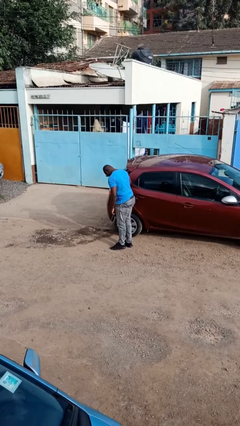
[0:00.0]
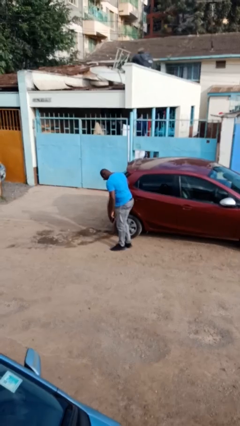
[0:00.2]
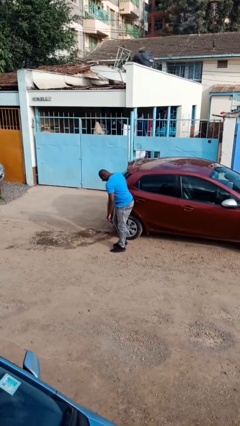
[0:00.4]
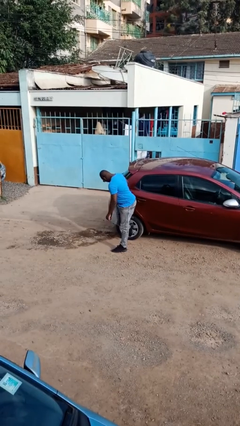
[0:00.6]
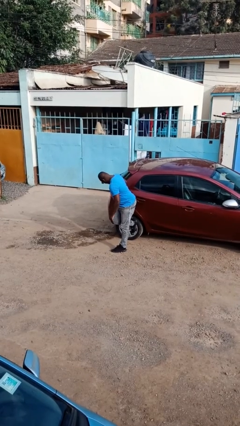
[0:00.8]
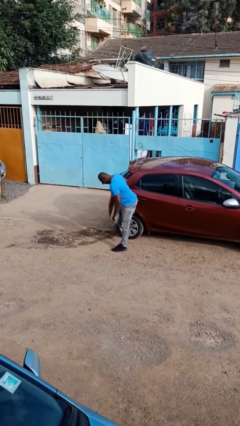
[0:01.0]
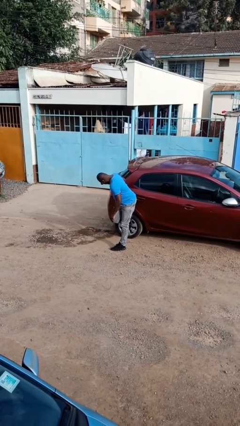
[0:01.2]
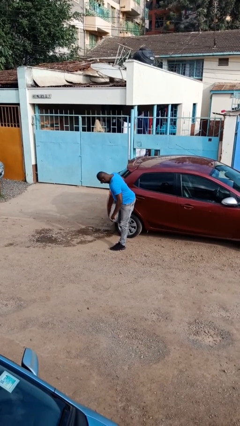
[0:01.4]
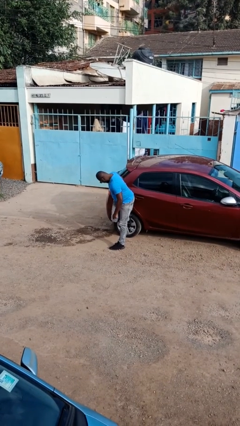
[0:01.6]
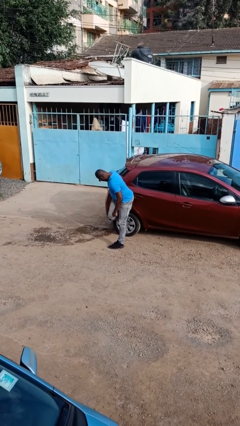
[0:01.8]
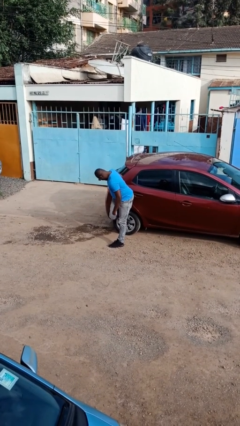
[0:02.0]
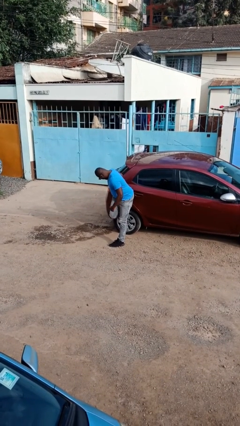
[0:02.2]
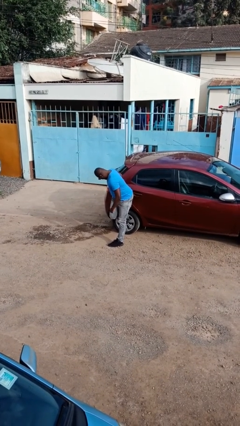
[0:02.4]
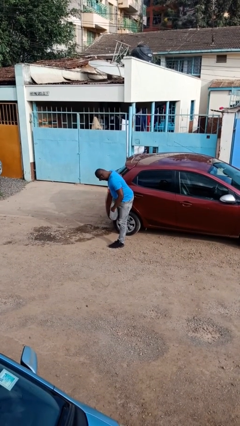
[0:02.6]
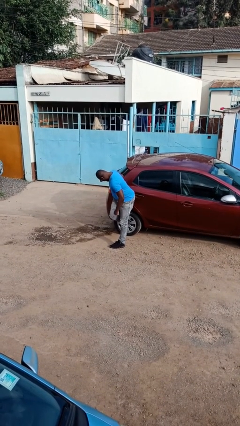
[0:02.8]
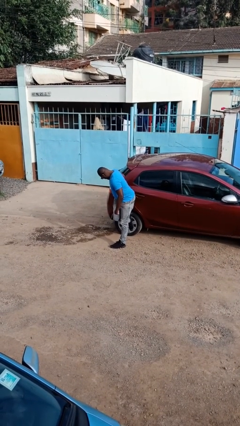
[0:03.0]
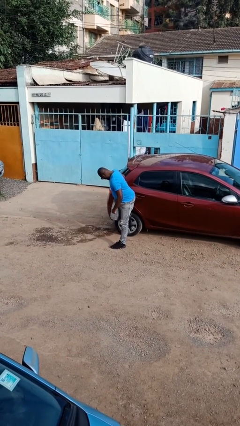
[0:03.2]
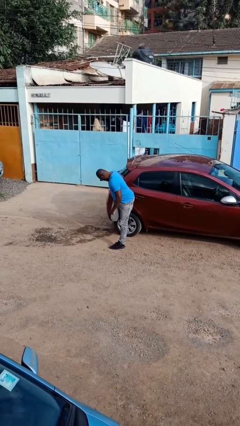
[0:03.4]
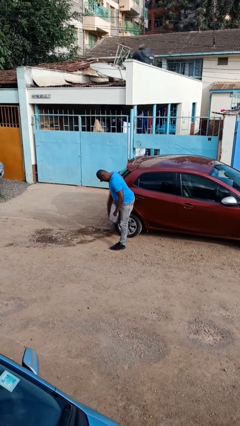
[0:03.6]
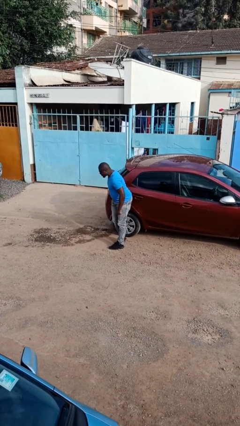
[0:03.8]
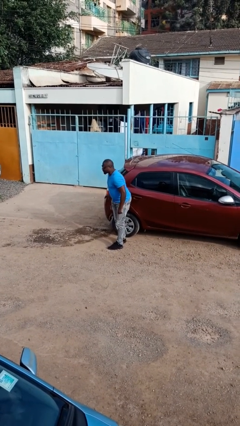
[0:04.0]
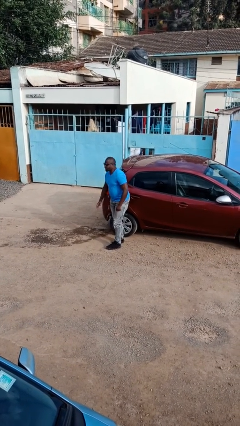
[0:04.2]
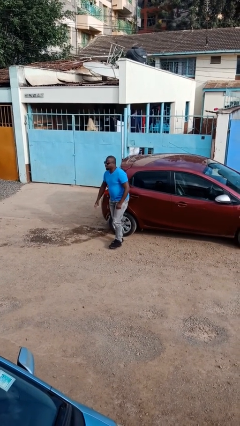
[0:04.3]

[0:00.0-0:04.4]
person kicks car tires

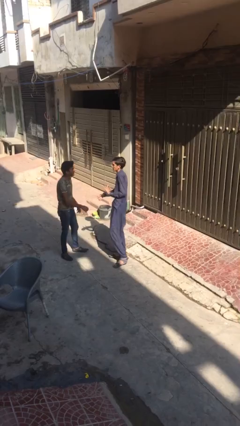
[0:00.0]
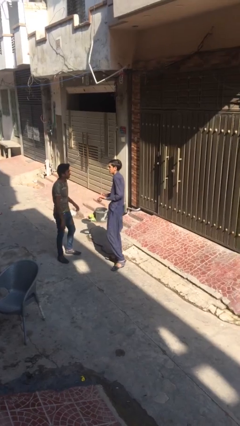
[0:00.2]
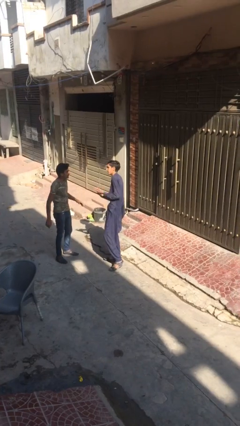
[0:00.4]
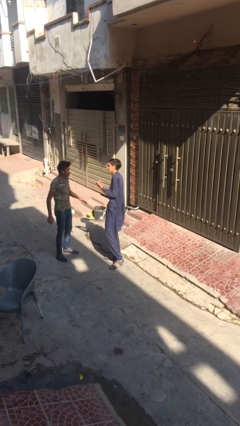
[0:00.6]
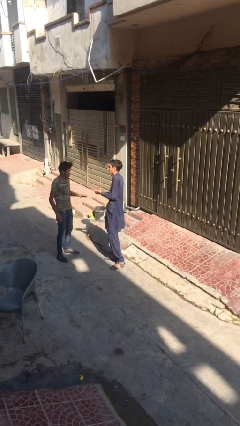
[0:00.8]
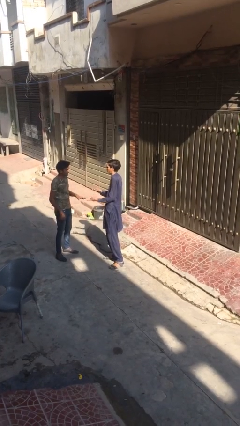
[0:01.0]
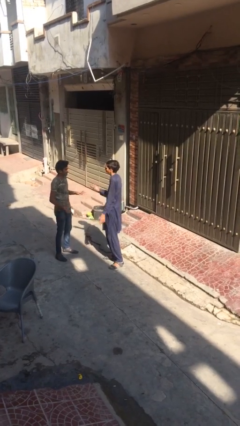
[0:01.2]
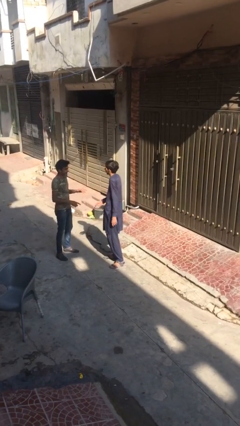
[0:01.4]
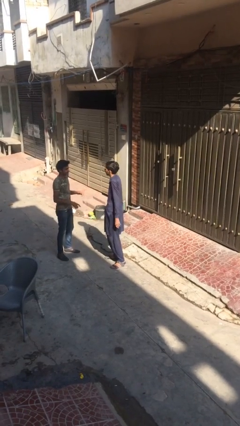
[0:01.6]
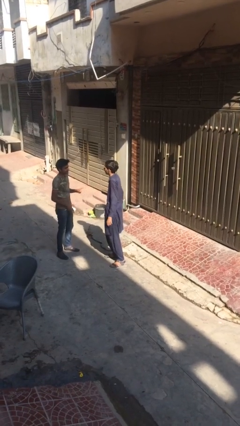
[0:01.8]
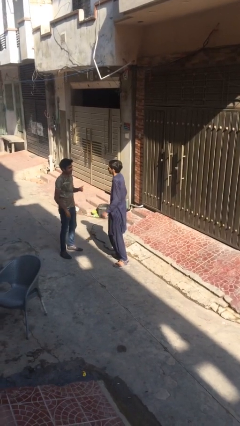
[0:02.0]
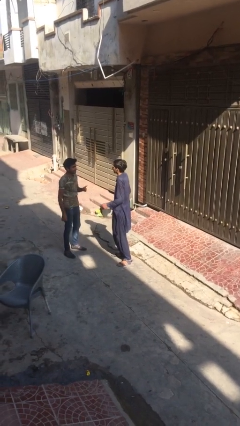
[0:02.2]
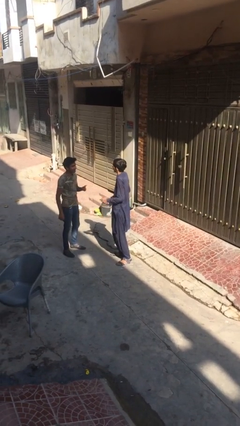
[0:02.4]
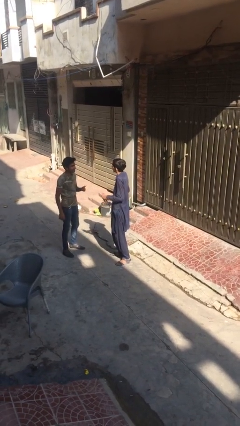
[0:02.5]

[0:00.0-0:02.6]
person talks to person

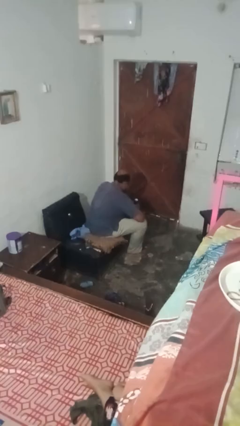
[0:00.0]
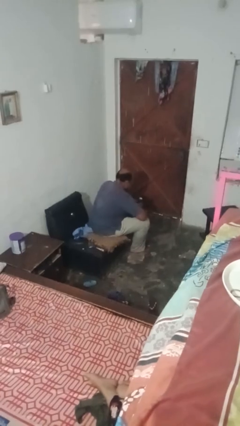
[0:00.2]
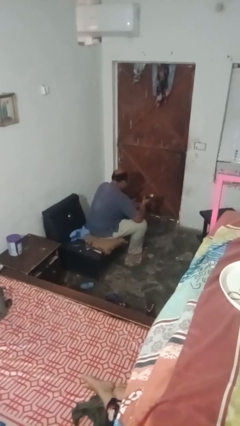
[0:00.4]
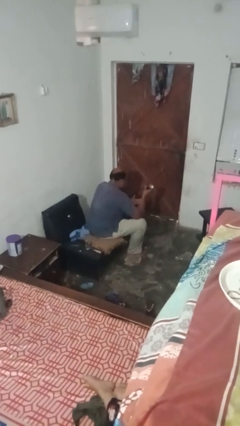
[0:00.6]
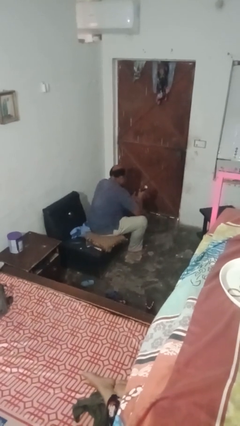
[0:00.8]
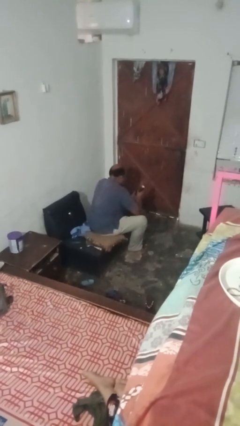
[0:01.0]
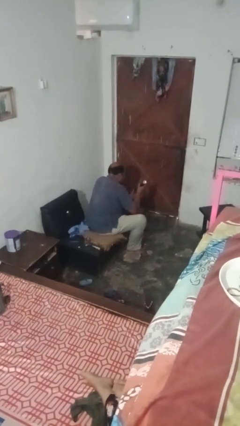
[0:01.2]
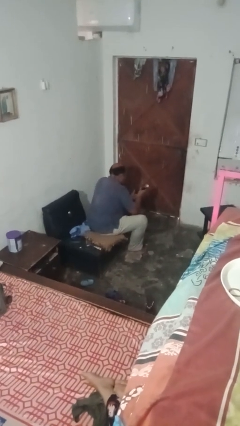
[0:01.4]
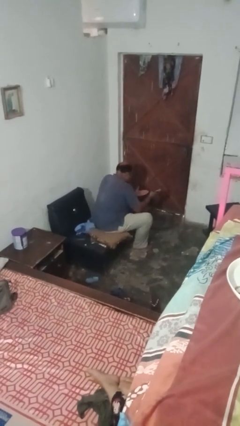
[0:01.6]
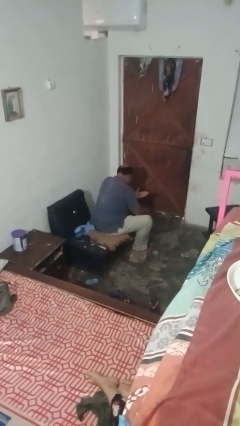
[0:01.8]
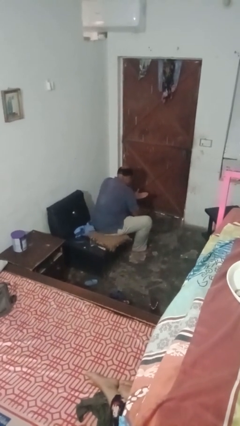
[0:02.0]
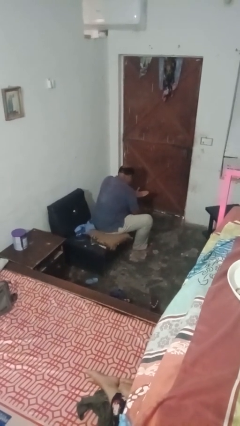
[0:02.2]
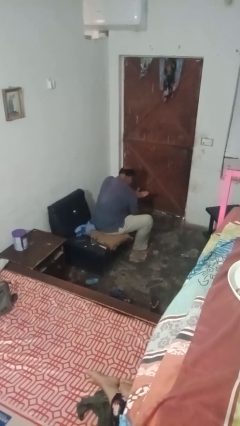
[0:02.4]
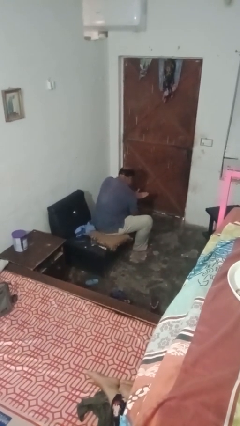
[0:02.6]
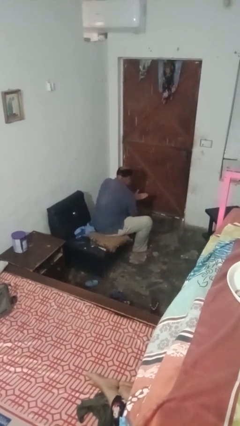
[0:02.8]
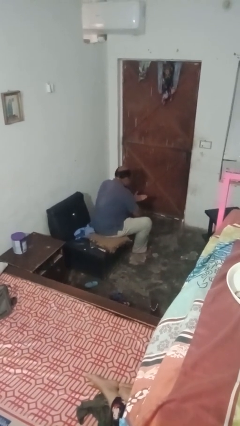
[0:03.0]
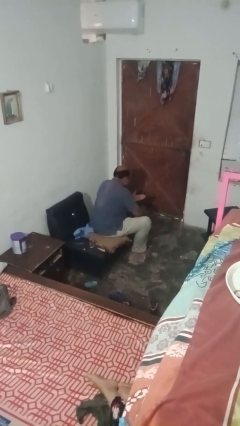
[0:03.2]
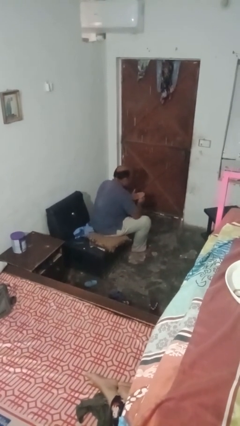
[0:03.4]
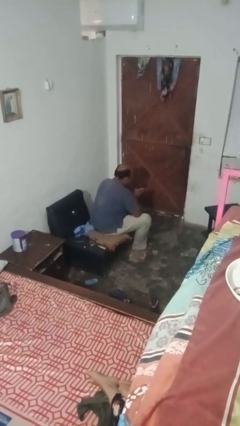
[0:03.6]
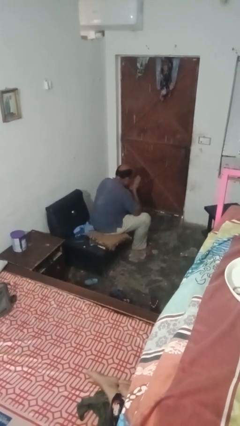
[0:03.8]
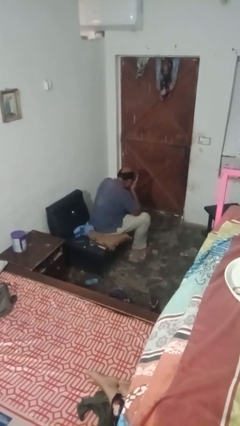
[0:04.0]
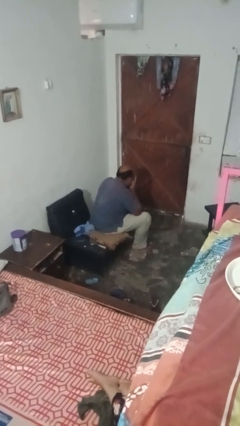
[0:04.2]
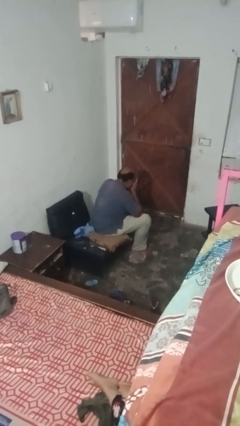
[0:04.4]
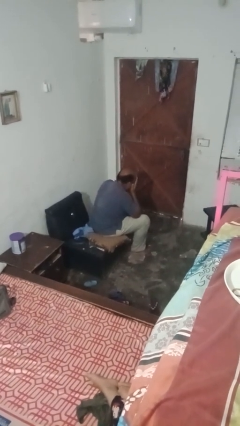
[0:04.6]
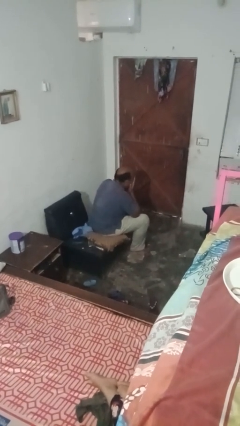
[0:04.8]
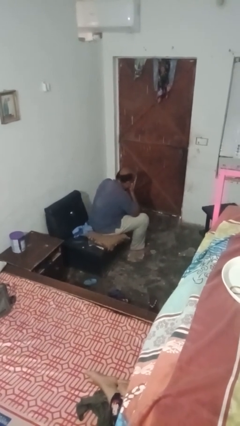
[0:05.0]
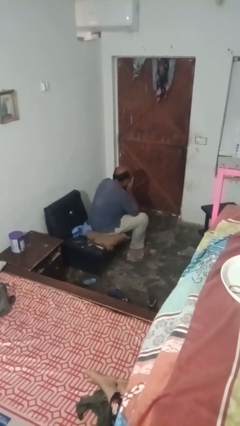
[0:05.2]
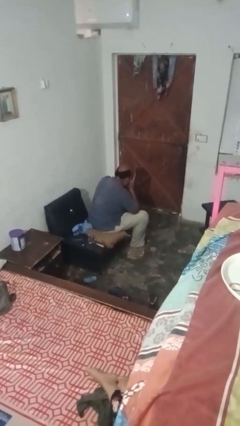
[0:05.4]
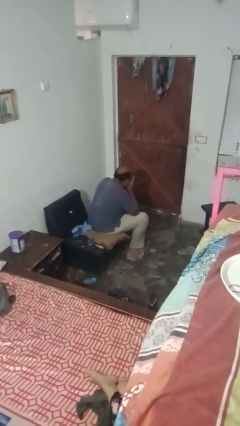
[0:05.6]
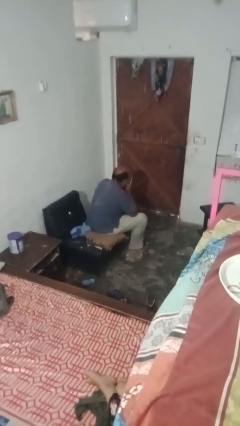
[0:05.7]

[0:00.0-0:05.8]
person applies foundation makeup

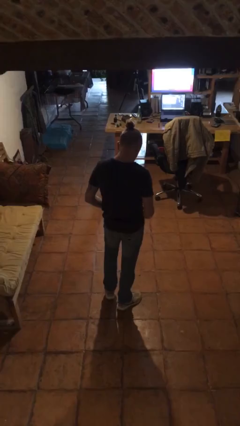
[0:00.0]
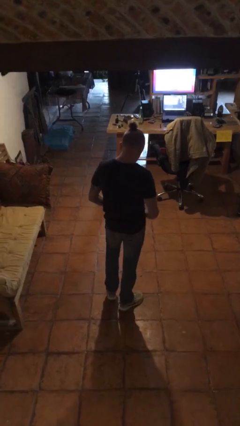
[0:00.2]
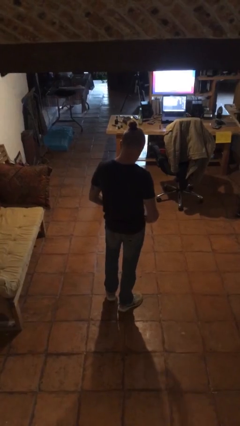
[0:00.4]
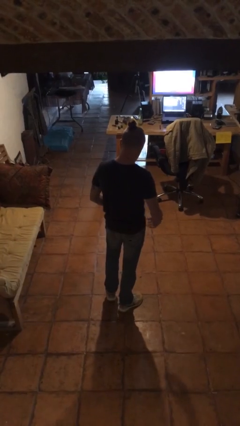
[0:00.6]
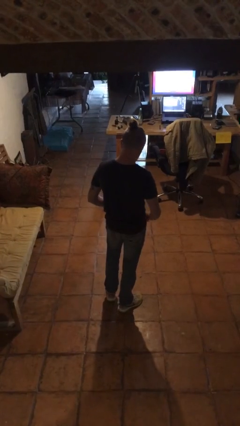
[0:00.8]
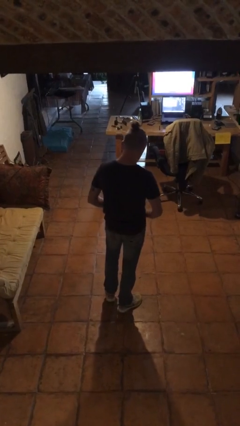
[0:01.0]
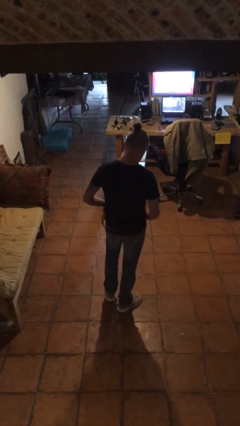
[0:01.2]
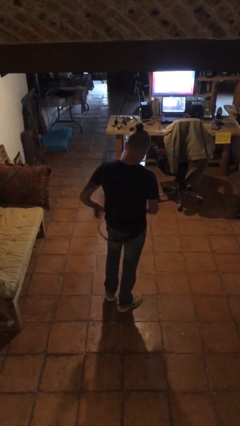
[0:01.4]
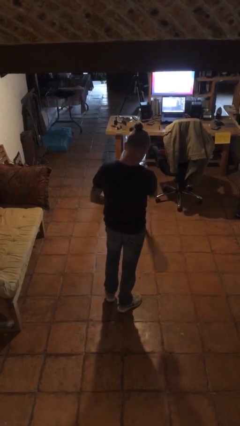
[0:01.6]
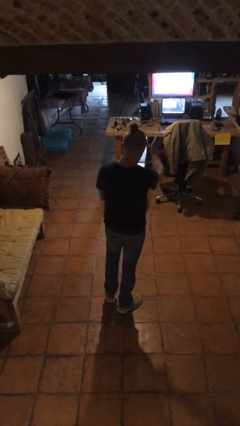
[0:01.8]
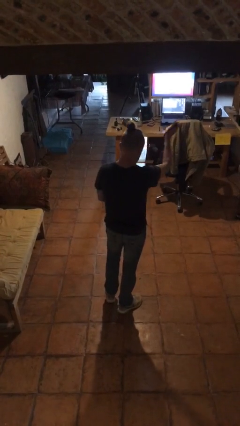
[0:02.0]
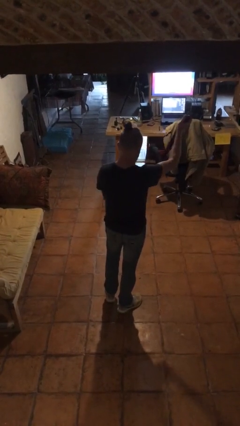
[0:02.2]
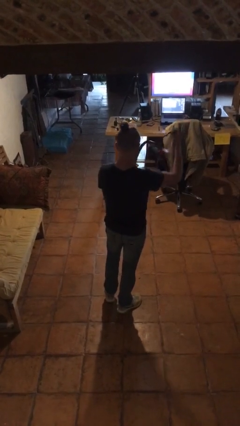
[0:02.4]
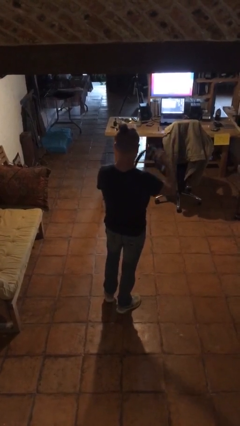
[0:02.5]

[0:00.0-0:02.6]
person takes off belt

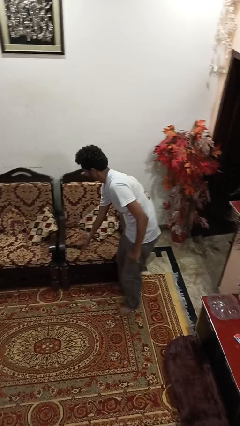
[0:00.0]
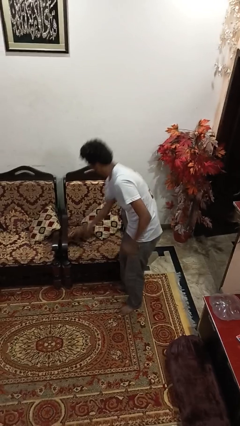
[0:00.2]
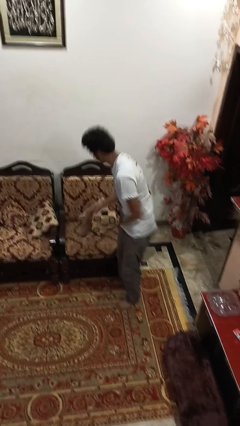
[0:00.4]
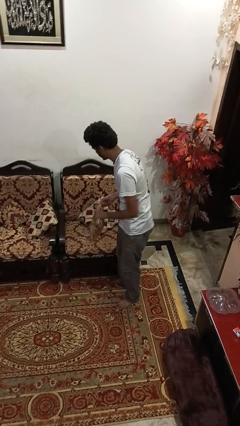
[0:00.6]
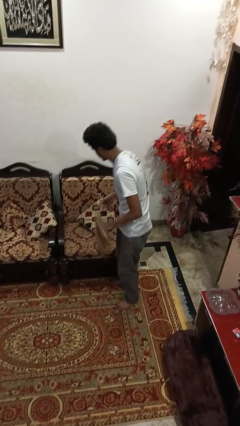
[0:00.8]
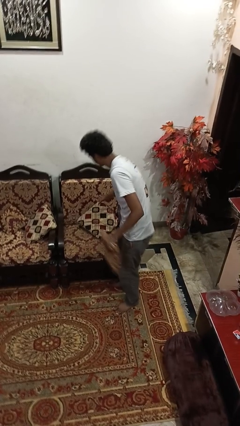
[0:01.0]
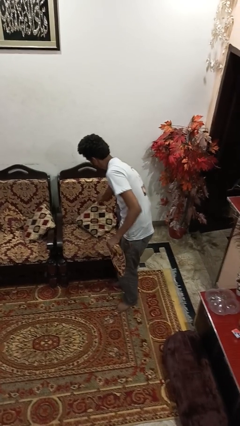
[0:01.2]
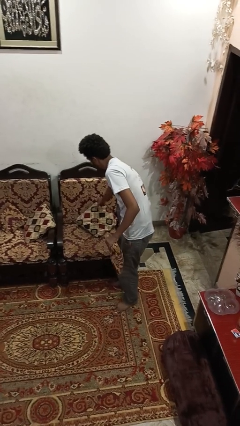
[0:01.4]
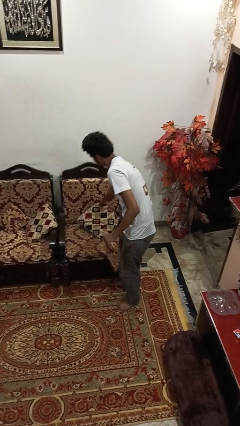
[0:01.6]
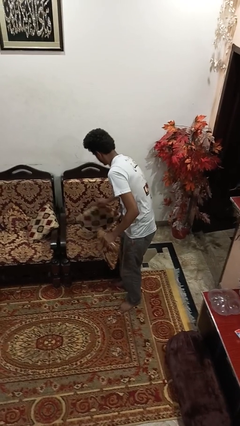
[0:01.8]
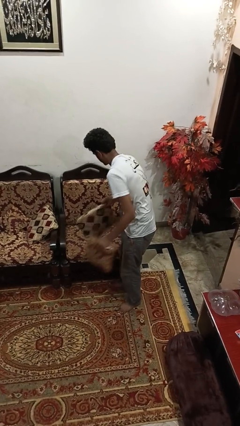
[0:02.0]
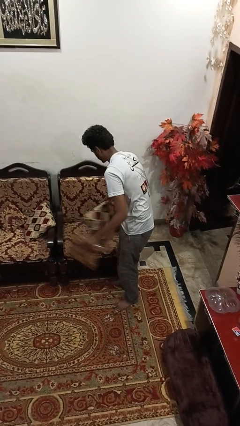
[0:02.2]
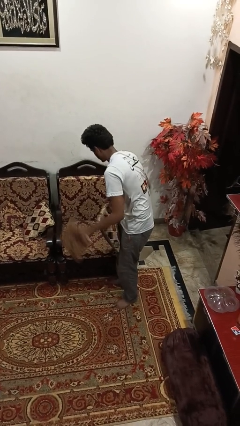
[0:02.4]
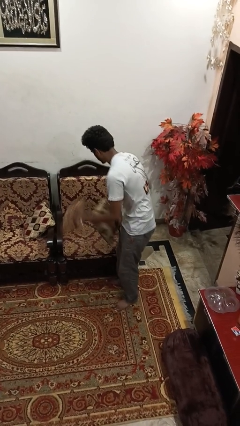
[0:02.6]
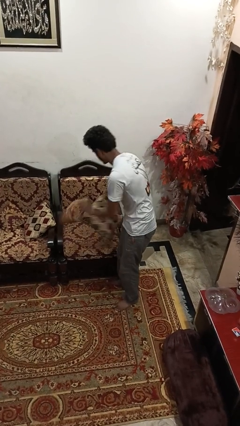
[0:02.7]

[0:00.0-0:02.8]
person searches in couch
